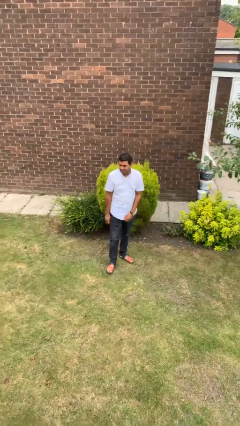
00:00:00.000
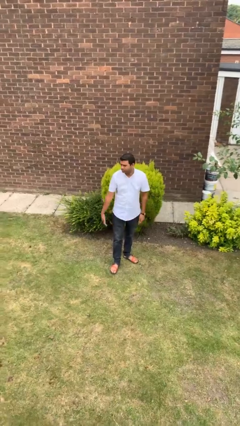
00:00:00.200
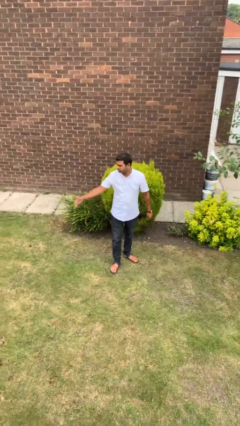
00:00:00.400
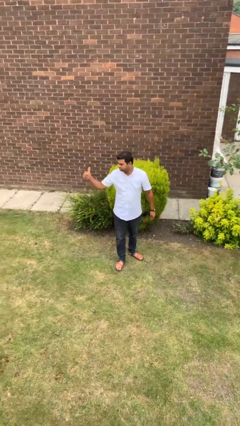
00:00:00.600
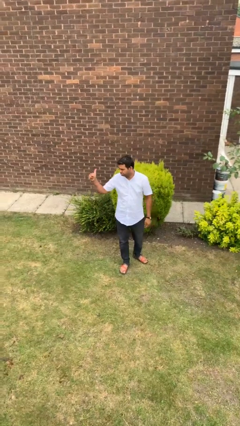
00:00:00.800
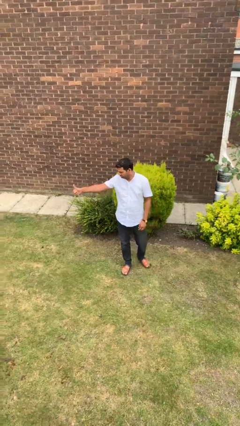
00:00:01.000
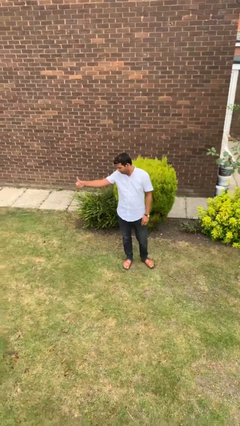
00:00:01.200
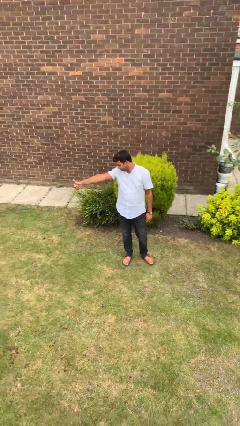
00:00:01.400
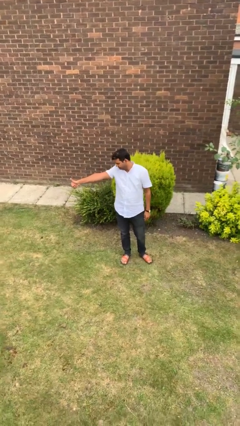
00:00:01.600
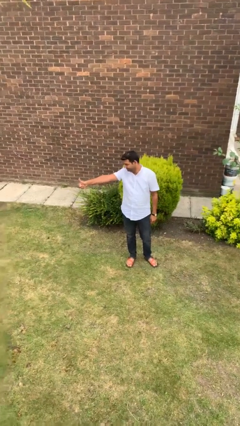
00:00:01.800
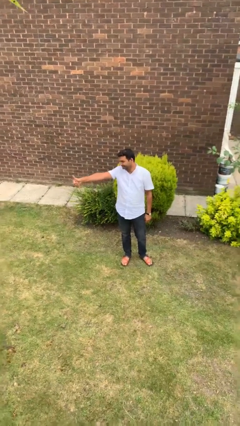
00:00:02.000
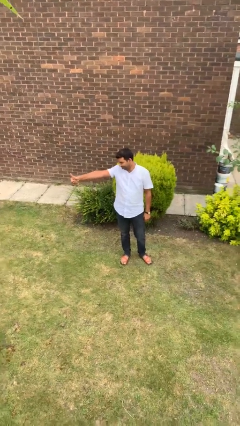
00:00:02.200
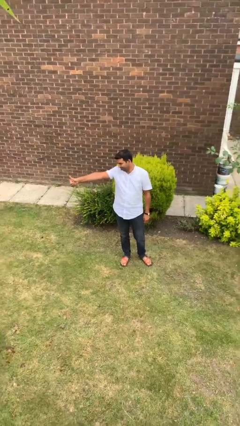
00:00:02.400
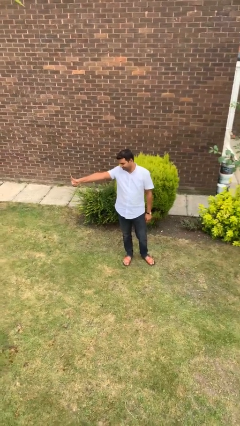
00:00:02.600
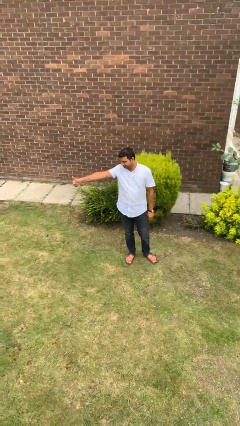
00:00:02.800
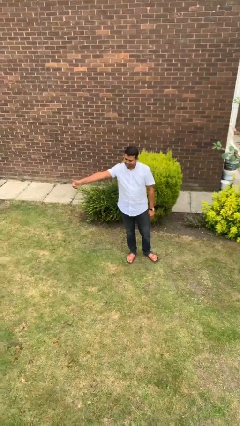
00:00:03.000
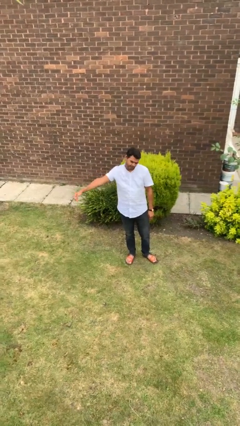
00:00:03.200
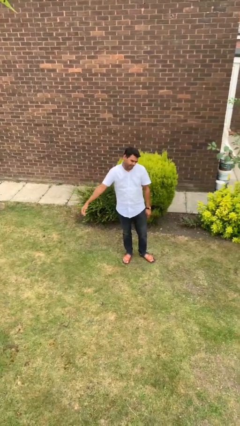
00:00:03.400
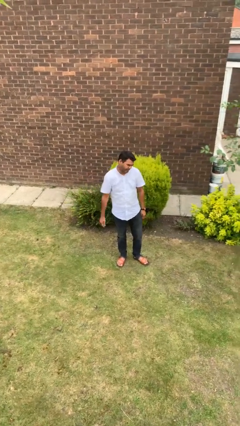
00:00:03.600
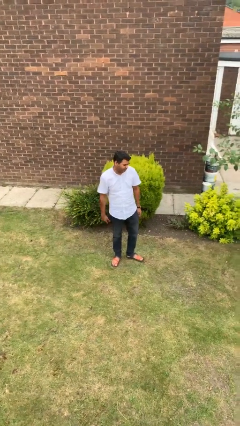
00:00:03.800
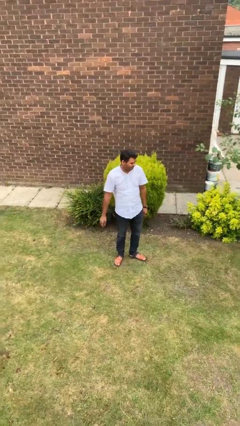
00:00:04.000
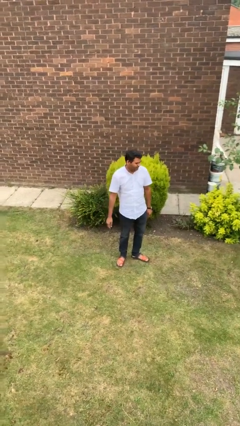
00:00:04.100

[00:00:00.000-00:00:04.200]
person gestures thumbs up

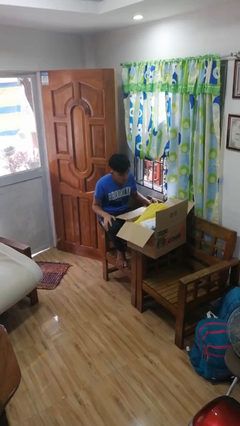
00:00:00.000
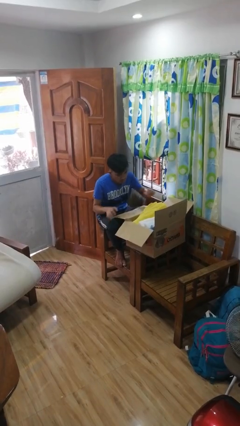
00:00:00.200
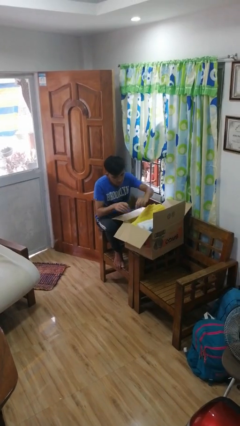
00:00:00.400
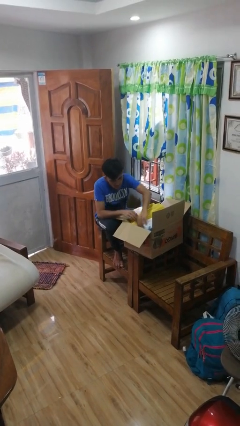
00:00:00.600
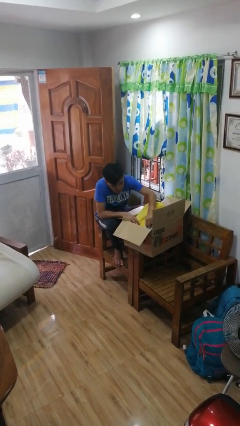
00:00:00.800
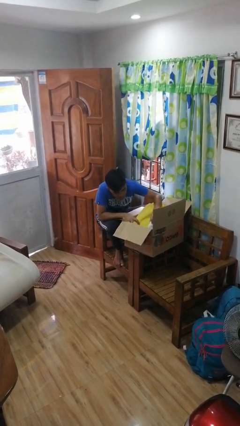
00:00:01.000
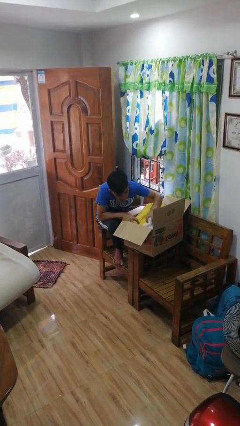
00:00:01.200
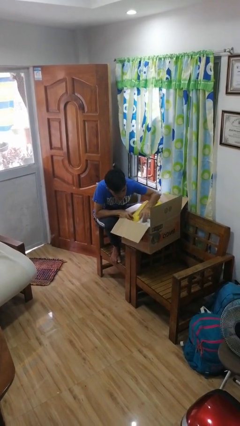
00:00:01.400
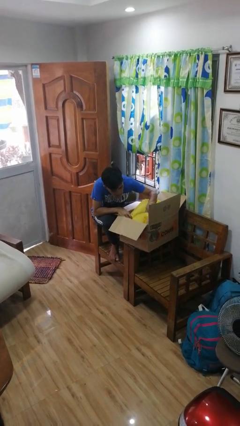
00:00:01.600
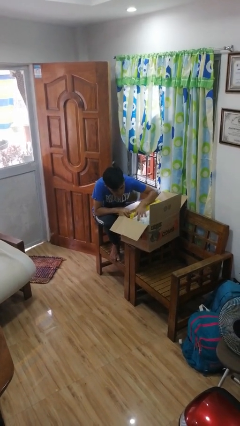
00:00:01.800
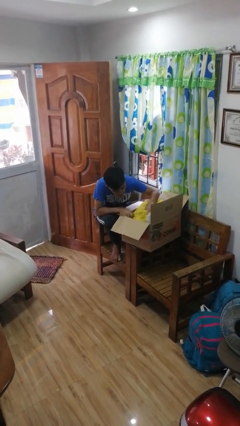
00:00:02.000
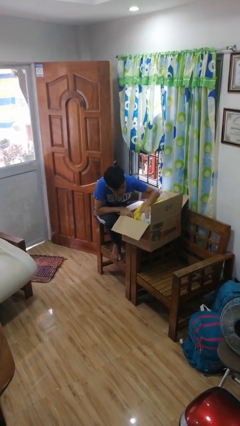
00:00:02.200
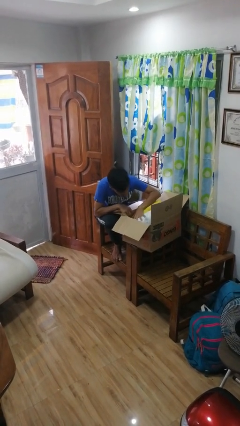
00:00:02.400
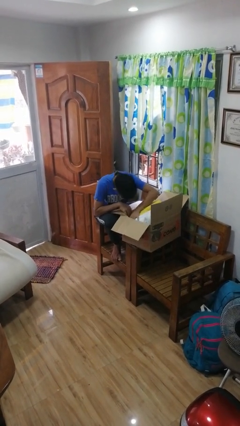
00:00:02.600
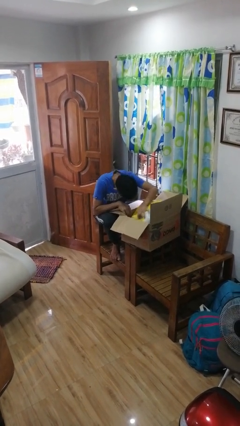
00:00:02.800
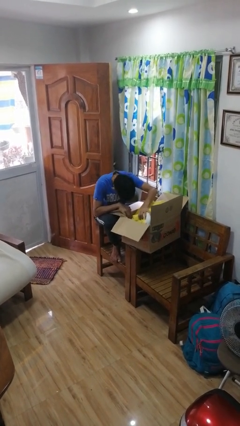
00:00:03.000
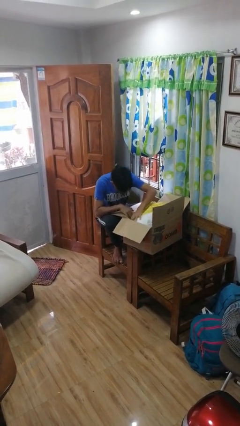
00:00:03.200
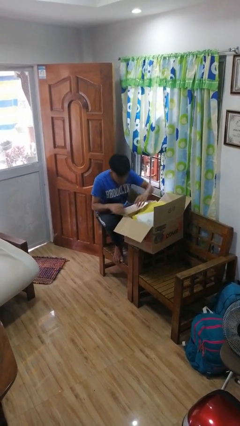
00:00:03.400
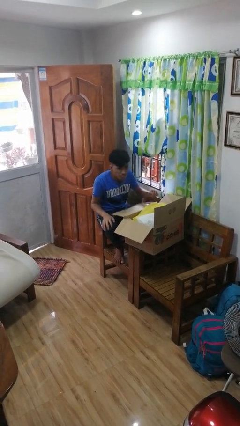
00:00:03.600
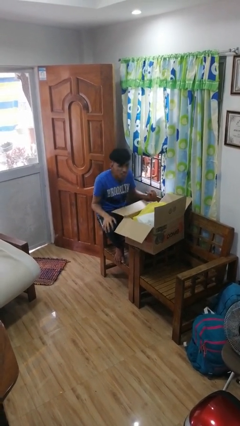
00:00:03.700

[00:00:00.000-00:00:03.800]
person searches in box

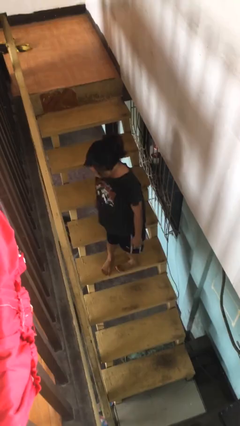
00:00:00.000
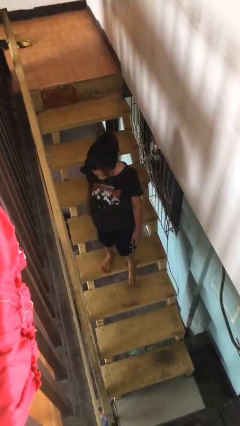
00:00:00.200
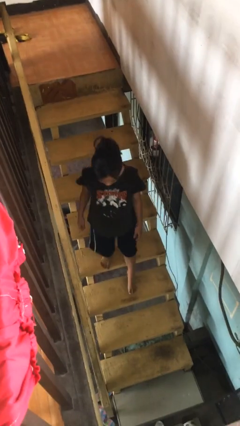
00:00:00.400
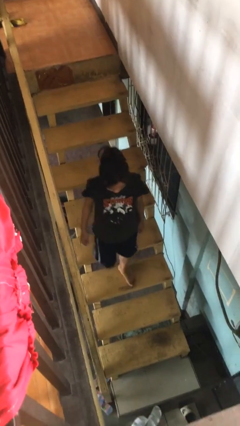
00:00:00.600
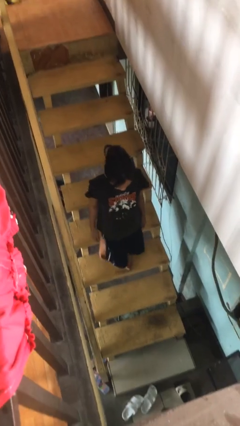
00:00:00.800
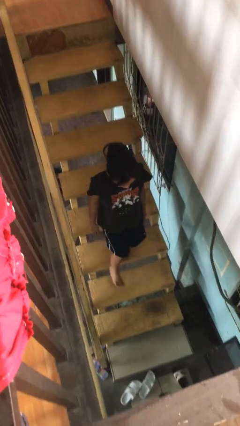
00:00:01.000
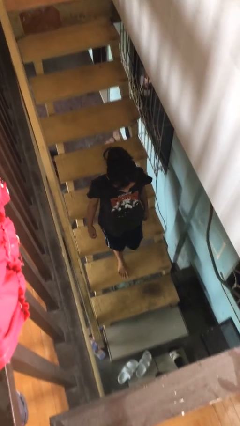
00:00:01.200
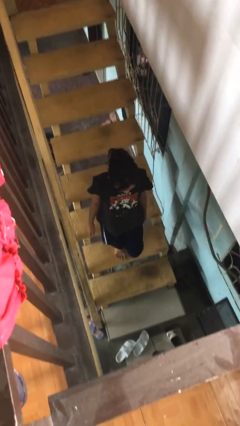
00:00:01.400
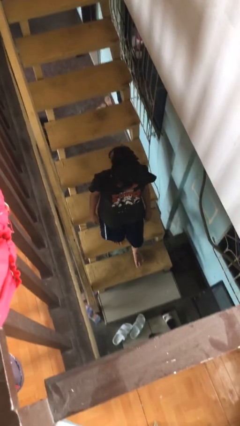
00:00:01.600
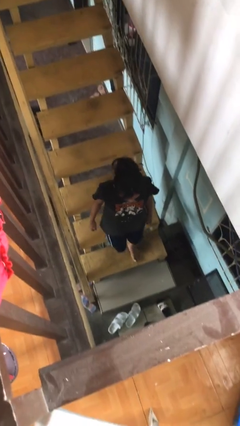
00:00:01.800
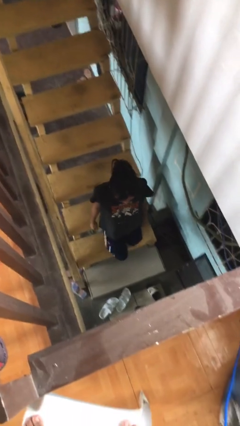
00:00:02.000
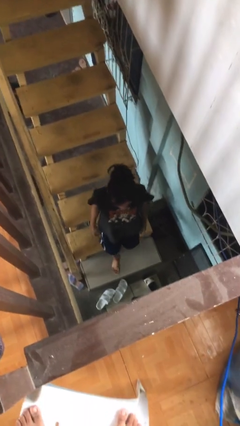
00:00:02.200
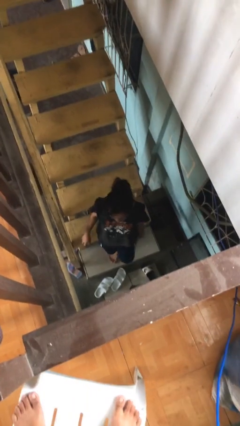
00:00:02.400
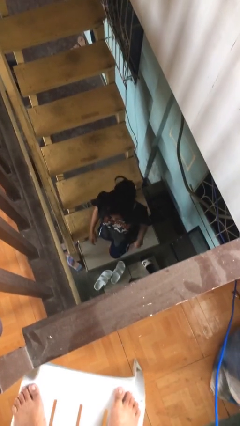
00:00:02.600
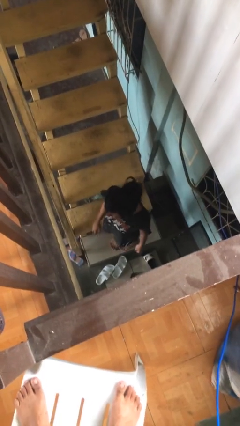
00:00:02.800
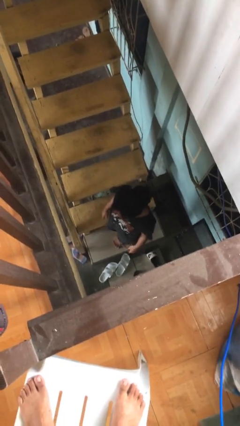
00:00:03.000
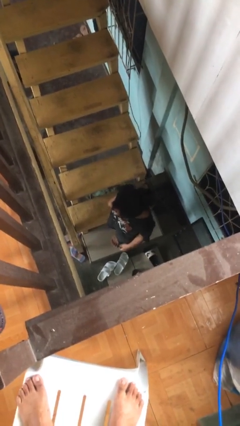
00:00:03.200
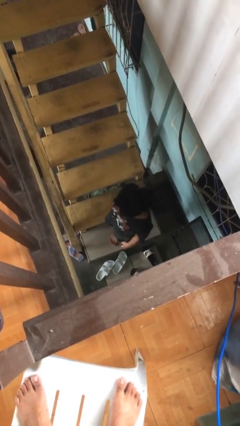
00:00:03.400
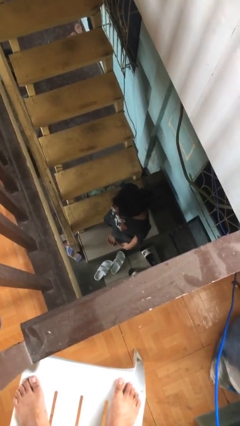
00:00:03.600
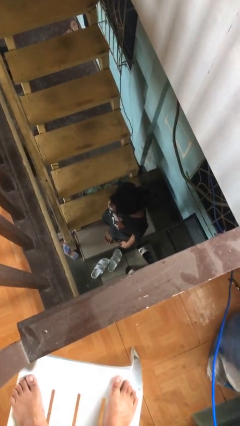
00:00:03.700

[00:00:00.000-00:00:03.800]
person climbs down stairs

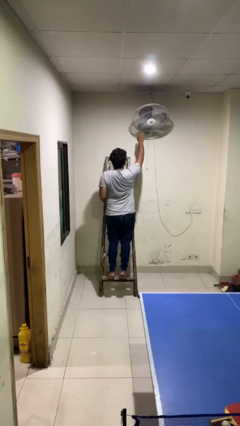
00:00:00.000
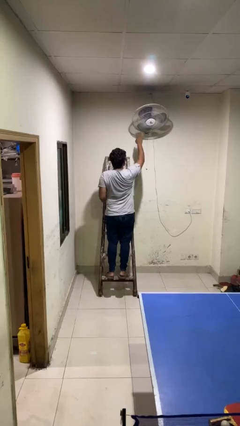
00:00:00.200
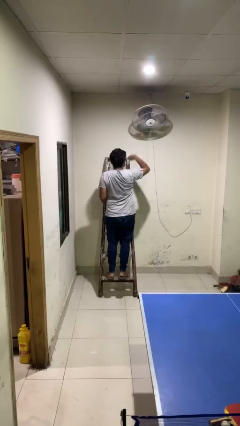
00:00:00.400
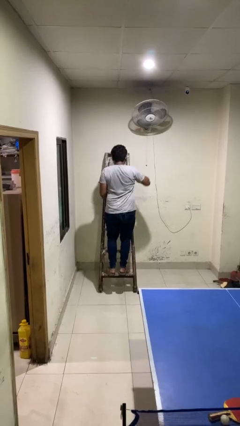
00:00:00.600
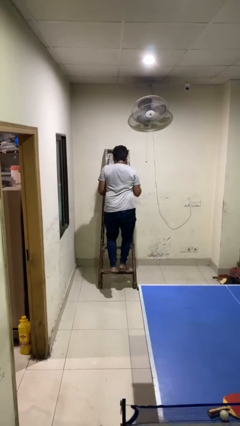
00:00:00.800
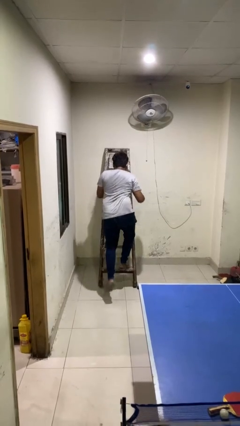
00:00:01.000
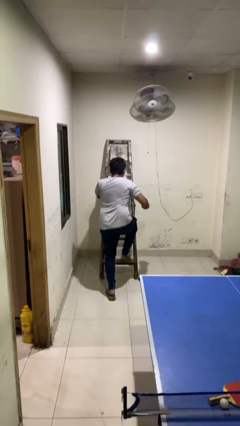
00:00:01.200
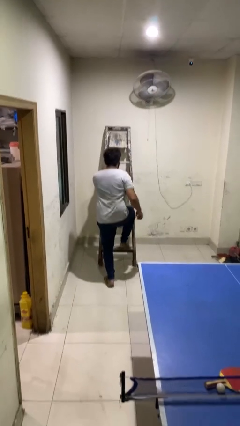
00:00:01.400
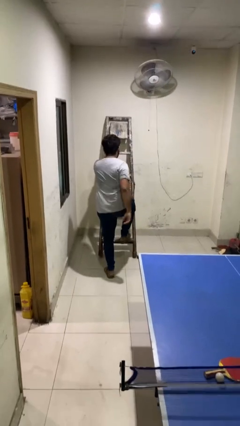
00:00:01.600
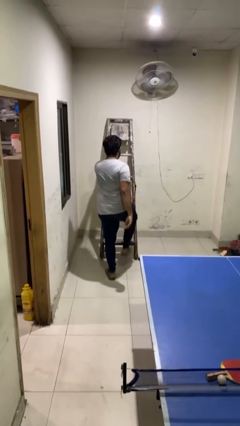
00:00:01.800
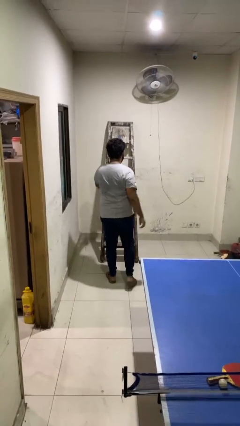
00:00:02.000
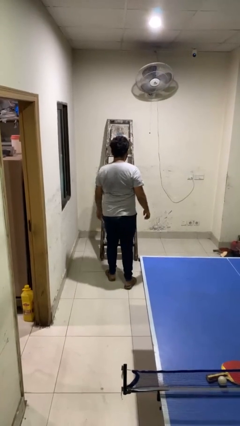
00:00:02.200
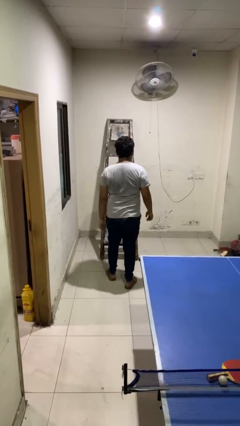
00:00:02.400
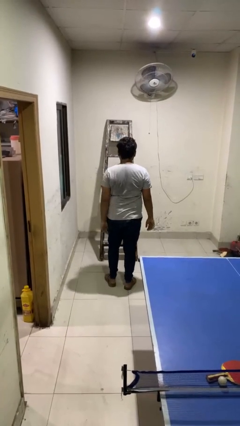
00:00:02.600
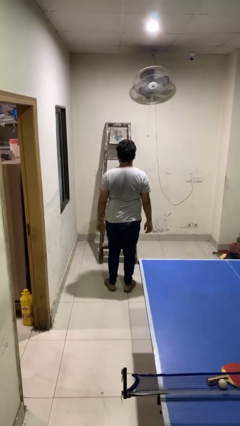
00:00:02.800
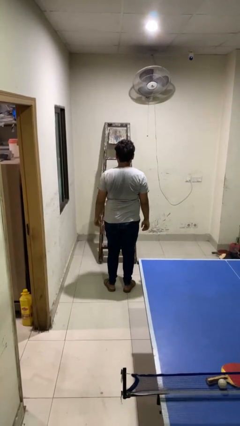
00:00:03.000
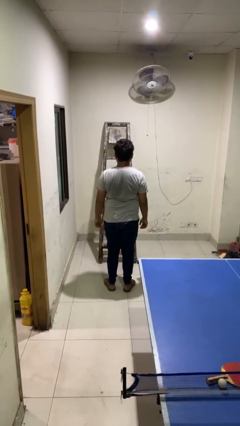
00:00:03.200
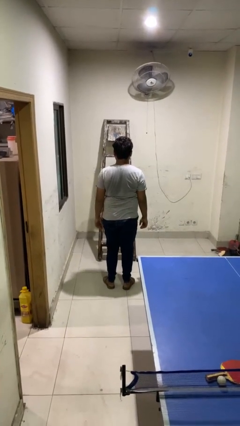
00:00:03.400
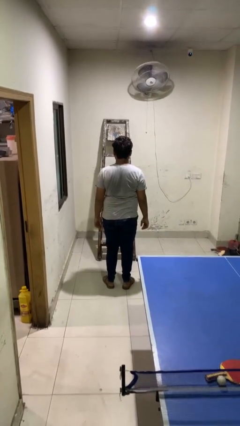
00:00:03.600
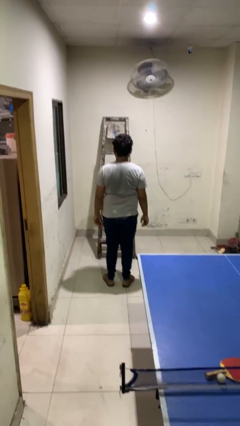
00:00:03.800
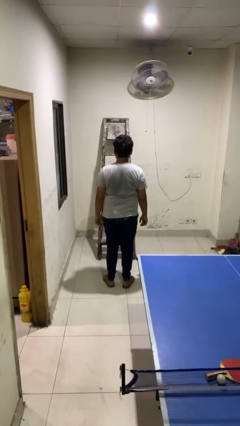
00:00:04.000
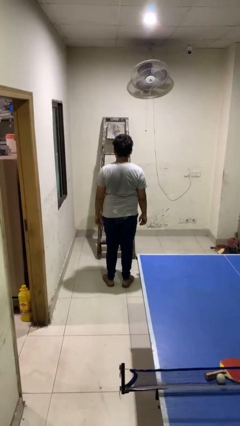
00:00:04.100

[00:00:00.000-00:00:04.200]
person climbs down ladder

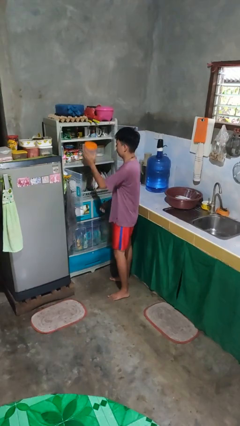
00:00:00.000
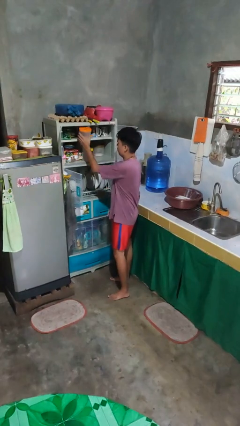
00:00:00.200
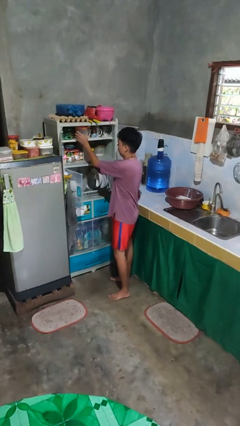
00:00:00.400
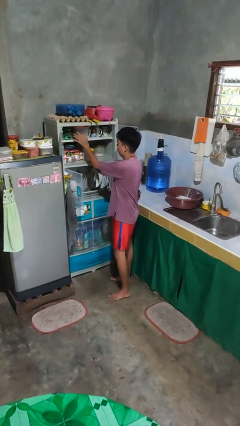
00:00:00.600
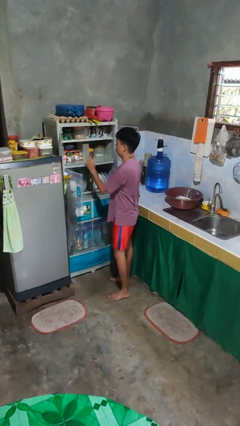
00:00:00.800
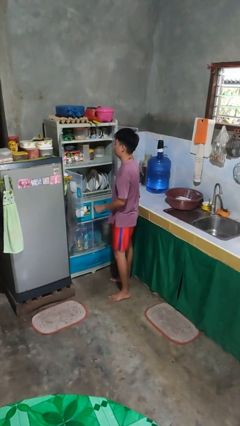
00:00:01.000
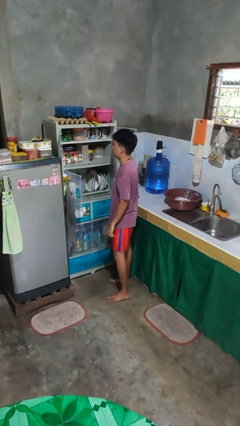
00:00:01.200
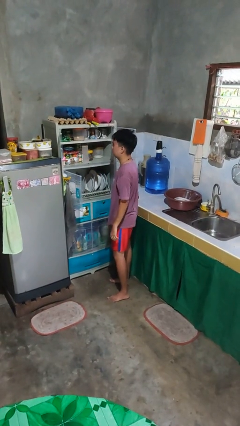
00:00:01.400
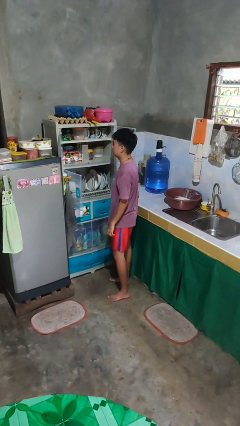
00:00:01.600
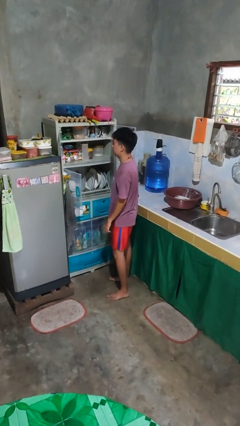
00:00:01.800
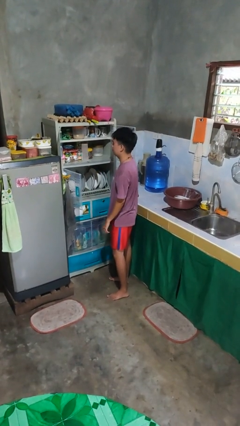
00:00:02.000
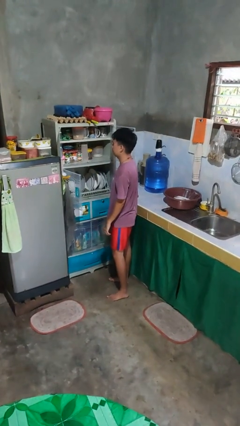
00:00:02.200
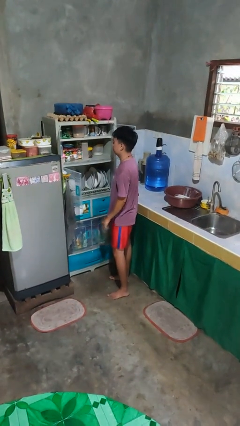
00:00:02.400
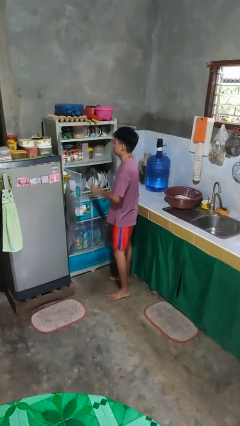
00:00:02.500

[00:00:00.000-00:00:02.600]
person puts object in cabinet
